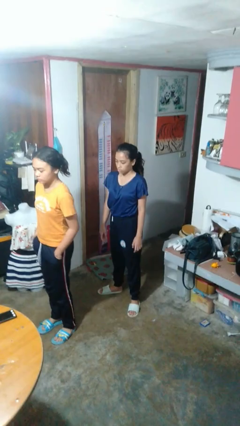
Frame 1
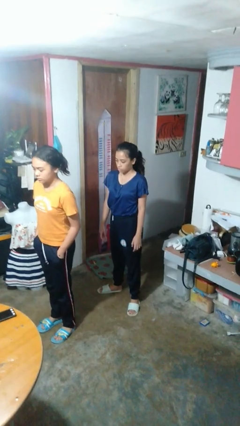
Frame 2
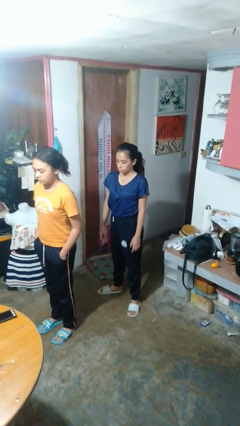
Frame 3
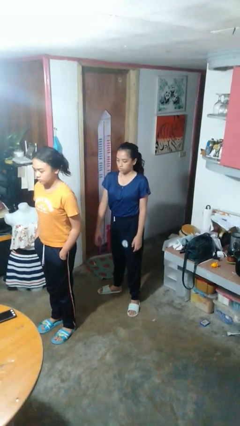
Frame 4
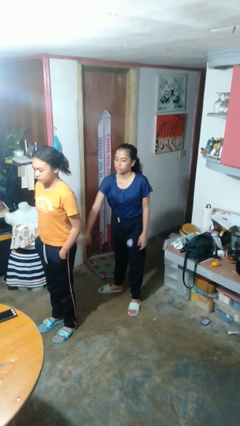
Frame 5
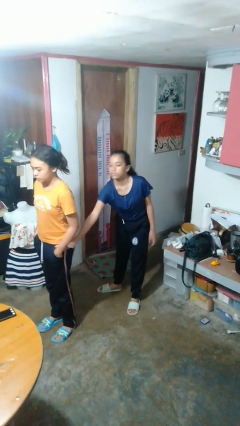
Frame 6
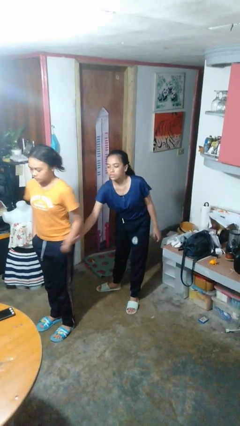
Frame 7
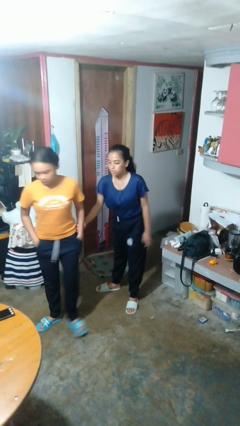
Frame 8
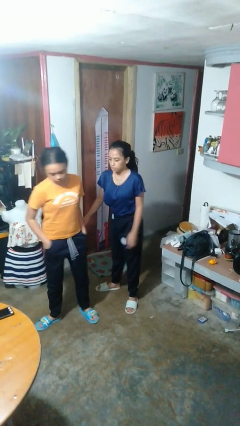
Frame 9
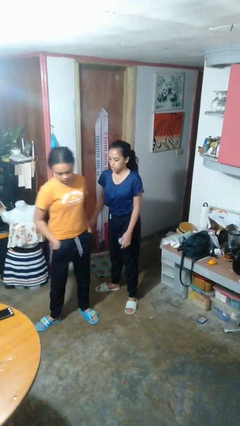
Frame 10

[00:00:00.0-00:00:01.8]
person grabs person by forearm

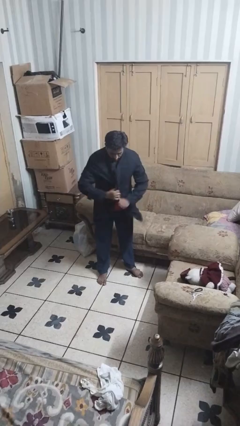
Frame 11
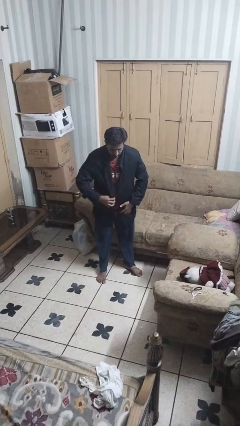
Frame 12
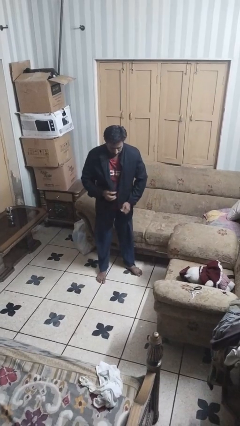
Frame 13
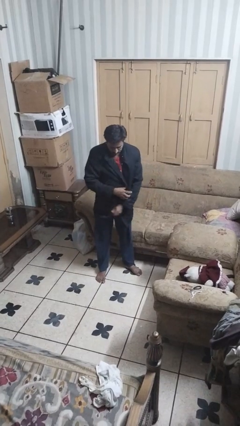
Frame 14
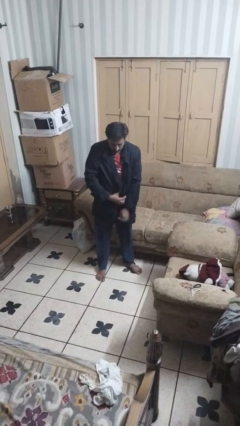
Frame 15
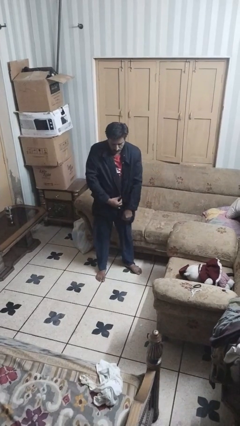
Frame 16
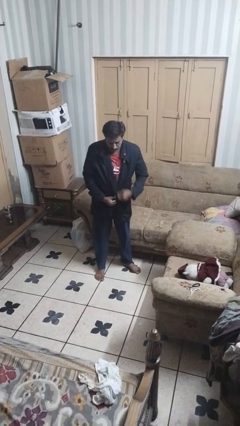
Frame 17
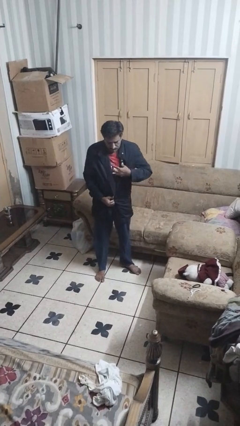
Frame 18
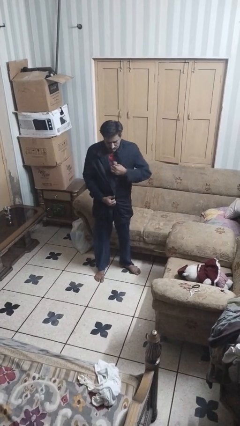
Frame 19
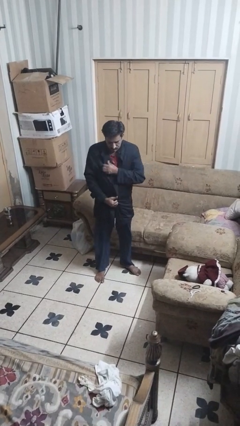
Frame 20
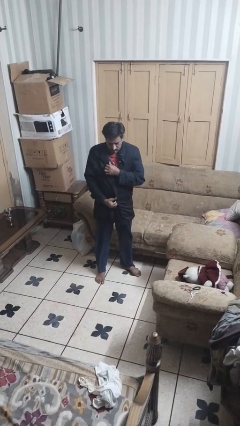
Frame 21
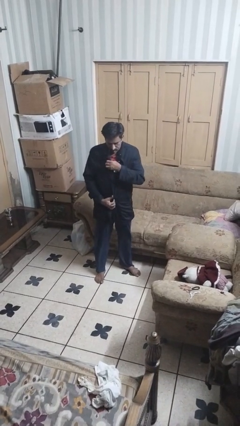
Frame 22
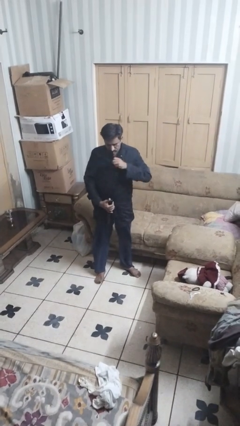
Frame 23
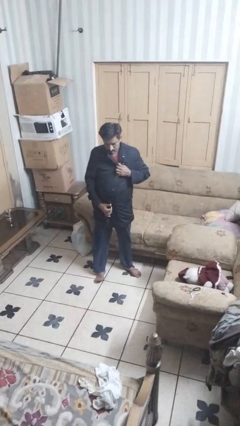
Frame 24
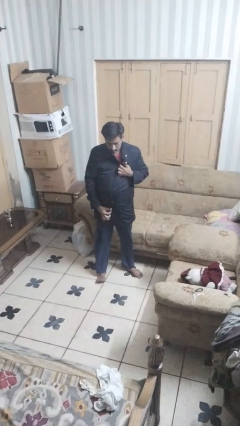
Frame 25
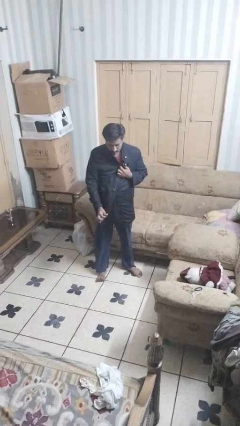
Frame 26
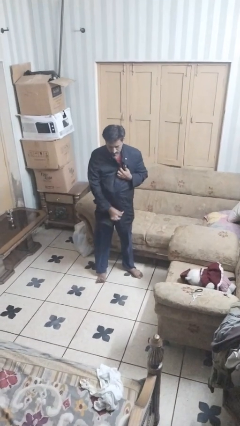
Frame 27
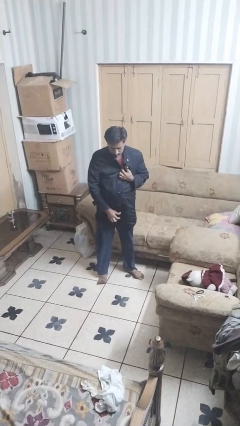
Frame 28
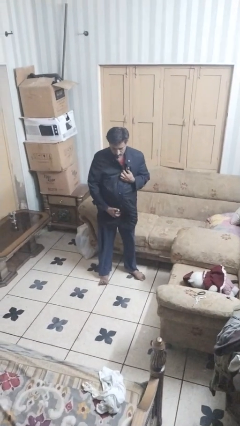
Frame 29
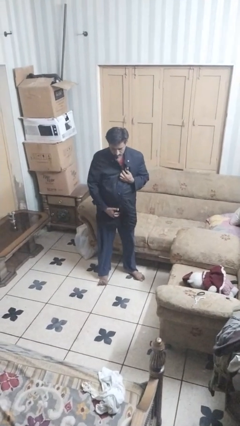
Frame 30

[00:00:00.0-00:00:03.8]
person zips up jacket

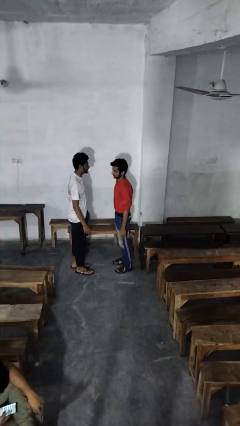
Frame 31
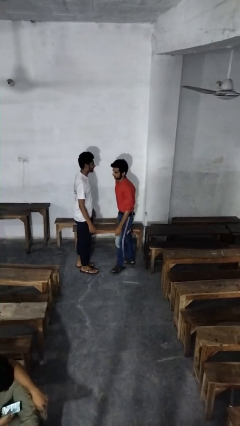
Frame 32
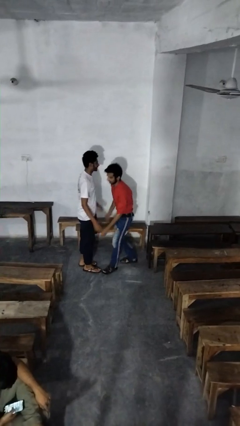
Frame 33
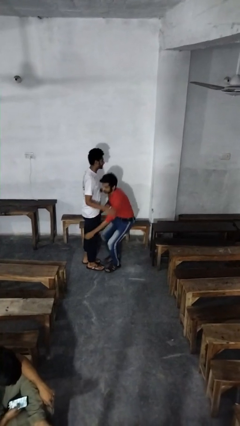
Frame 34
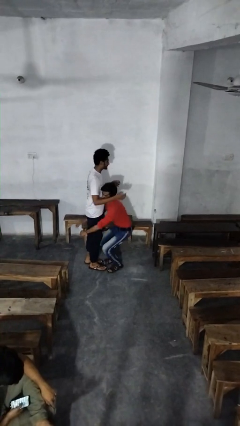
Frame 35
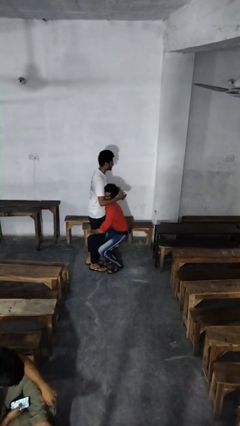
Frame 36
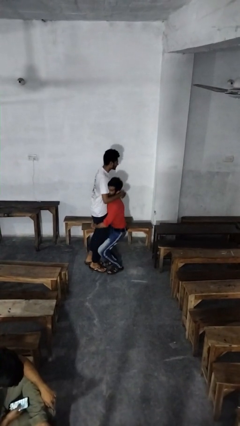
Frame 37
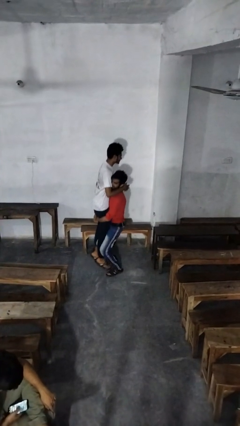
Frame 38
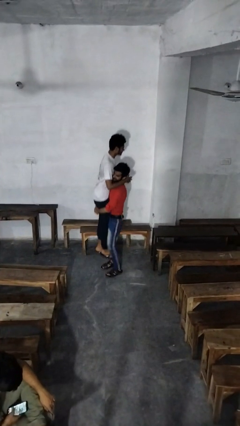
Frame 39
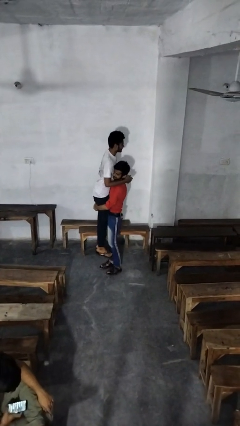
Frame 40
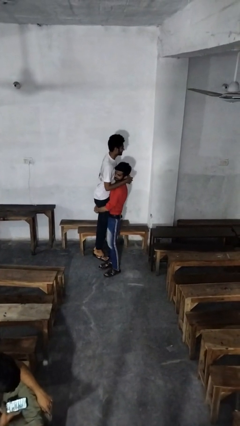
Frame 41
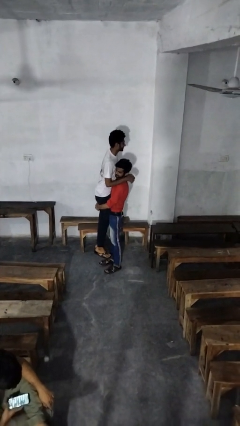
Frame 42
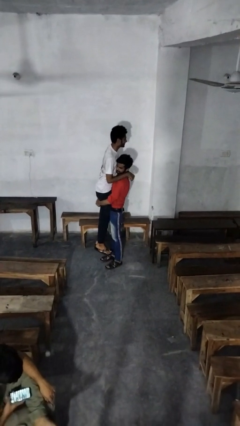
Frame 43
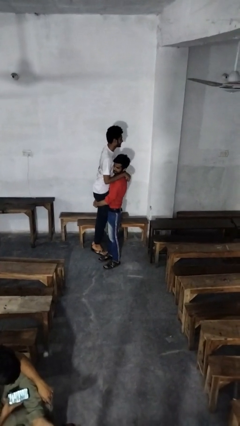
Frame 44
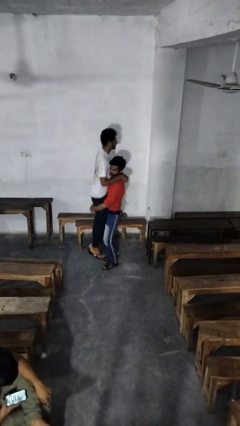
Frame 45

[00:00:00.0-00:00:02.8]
person picks up person

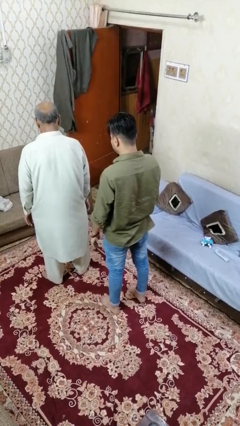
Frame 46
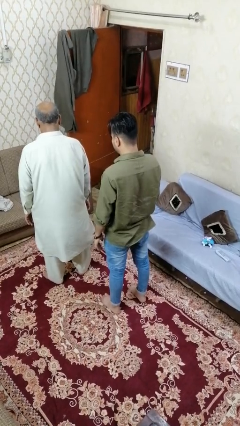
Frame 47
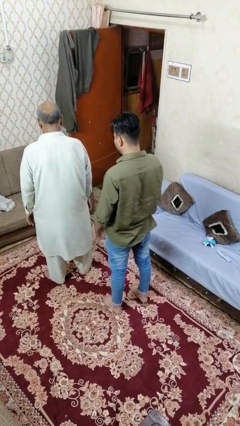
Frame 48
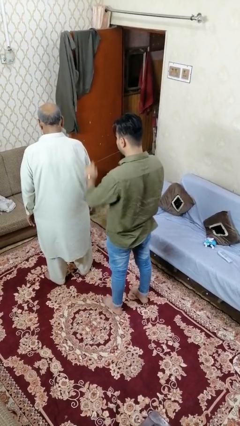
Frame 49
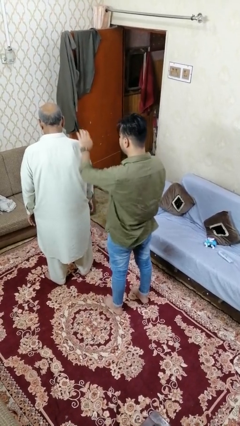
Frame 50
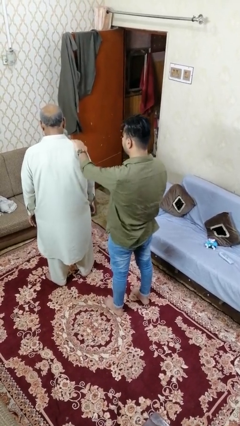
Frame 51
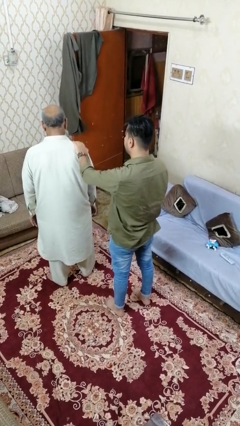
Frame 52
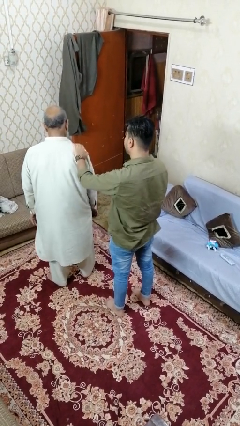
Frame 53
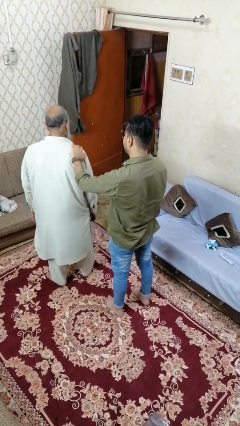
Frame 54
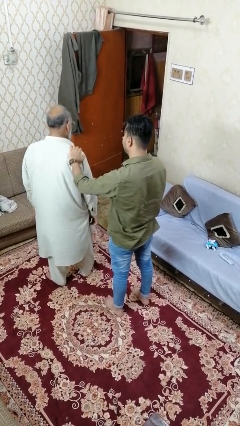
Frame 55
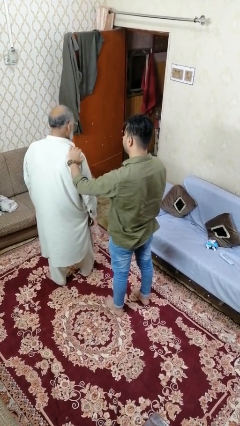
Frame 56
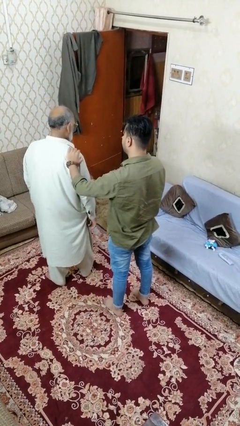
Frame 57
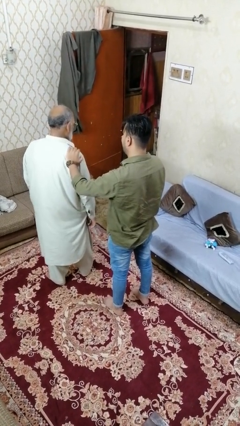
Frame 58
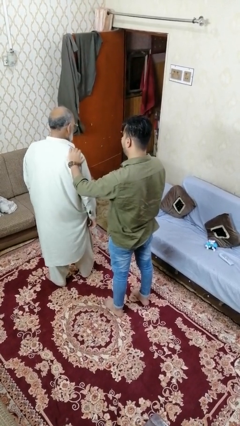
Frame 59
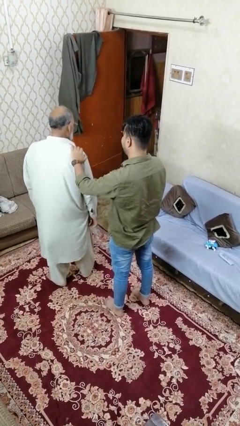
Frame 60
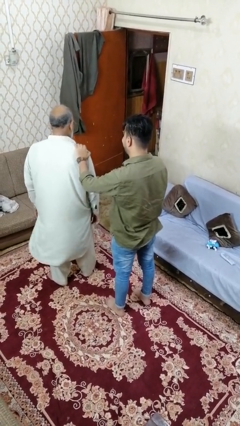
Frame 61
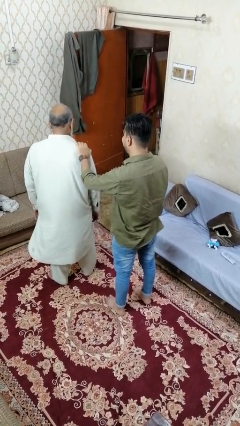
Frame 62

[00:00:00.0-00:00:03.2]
person touches back of person

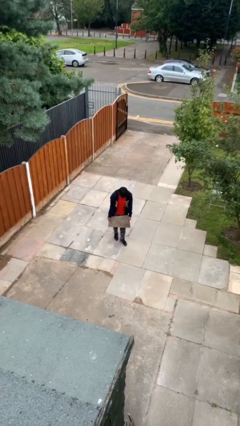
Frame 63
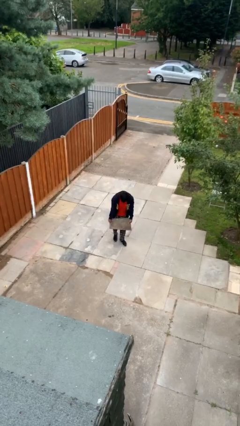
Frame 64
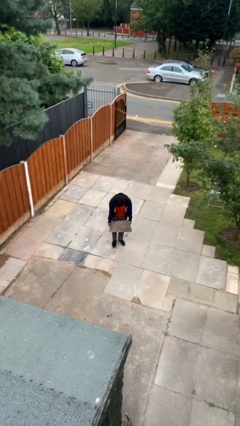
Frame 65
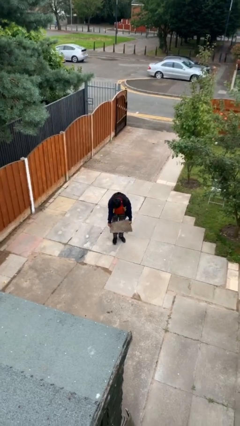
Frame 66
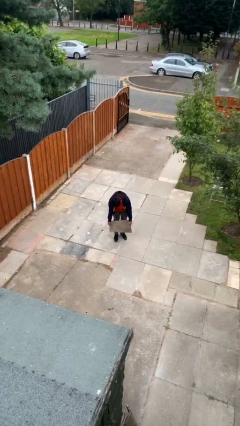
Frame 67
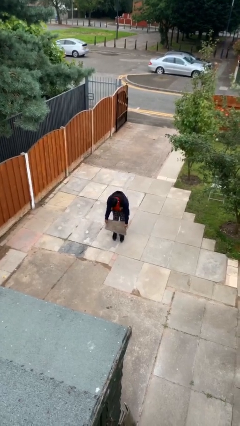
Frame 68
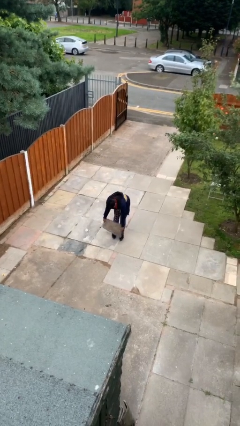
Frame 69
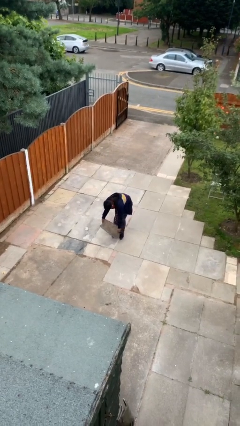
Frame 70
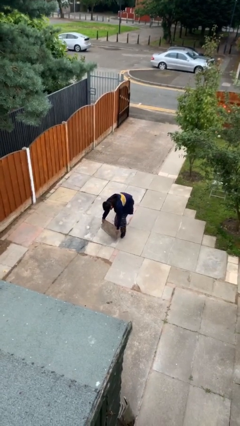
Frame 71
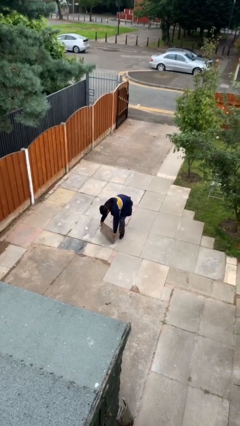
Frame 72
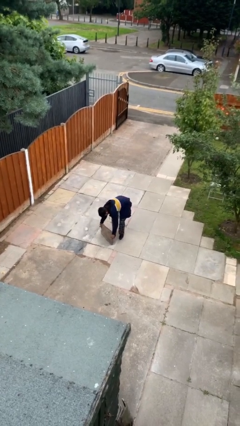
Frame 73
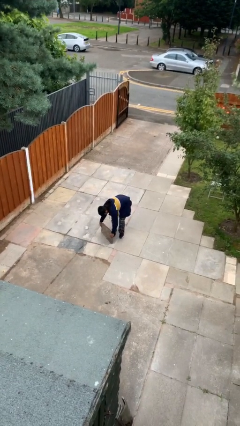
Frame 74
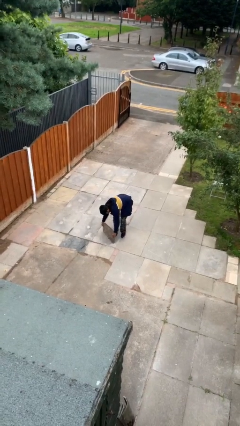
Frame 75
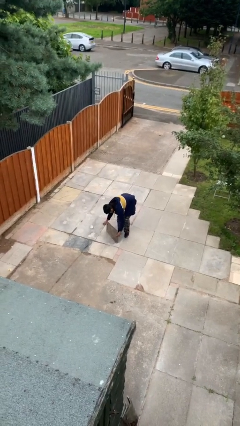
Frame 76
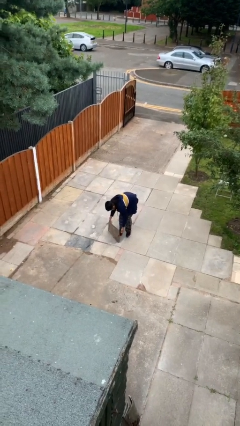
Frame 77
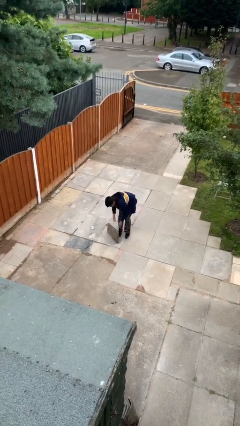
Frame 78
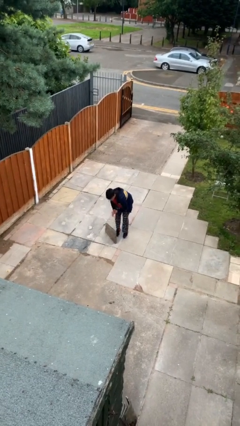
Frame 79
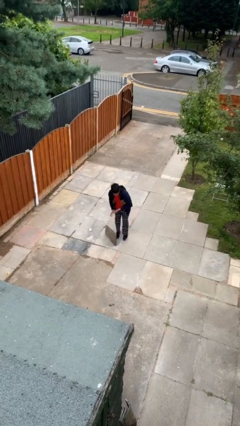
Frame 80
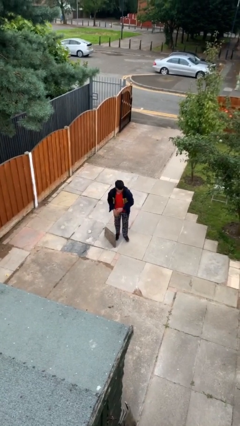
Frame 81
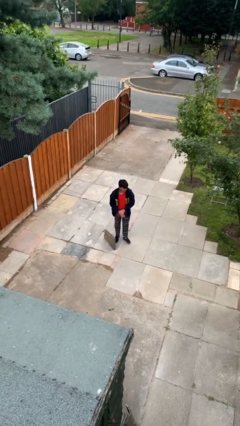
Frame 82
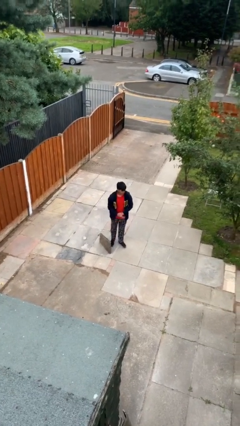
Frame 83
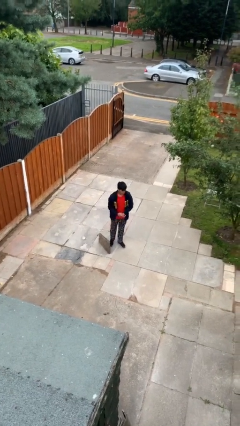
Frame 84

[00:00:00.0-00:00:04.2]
person puts down object on floor

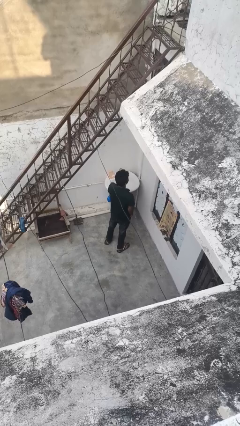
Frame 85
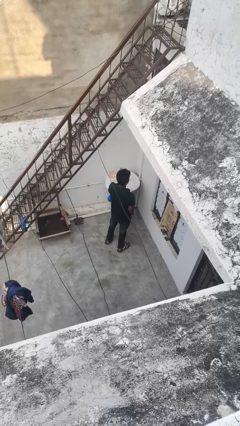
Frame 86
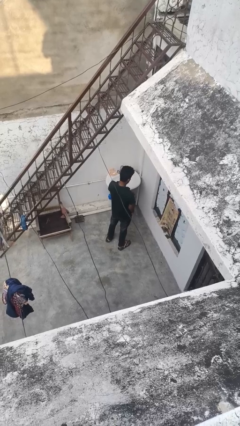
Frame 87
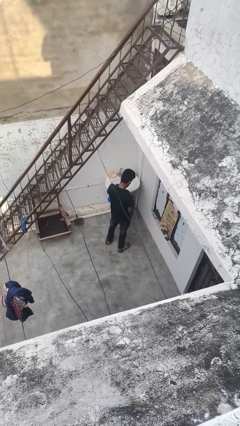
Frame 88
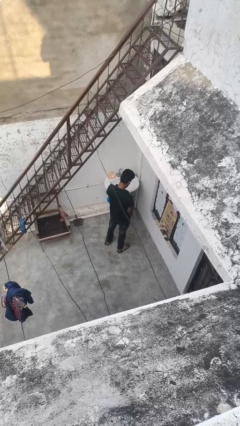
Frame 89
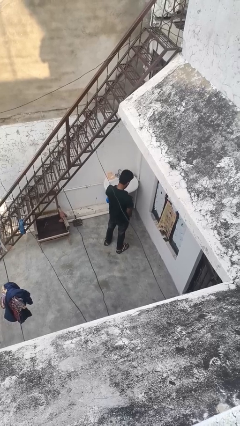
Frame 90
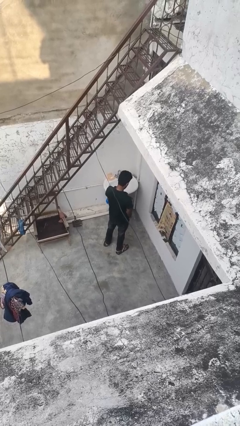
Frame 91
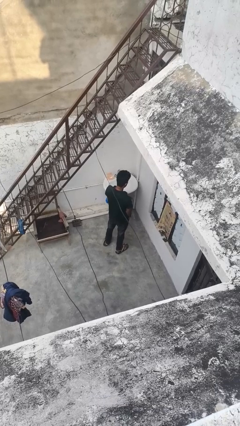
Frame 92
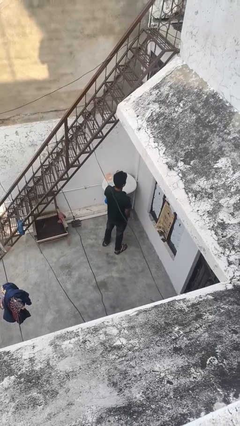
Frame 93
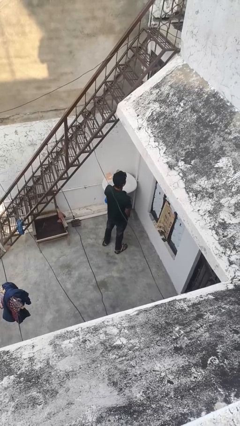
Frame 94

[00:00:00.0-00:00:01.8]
person strokes chin
